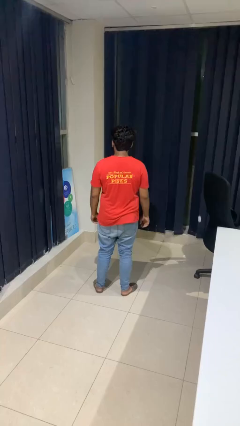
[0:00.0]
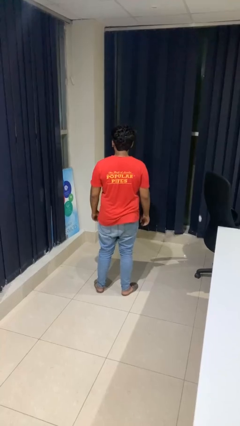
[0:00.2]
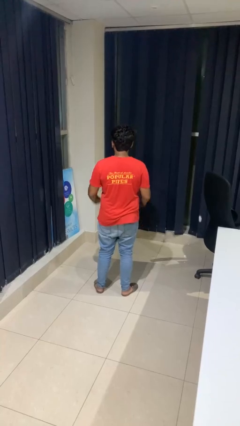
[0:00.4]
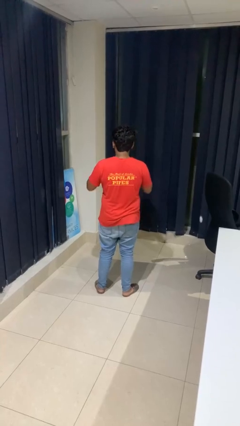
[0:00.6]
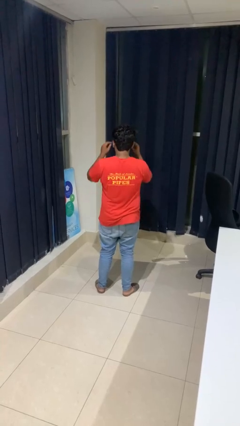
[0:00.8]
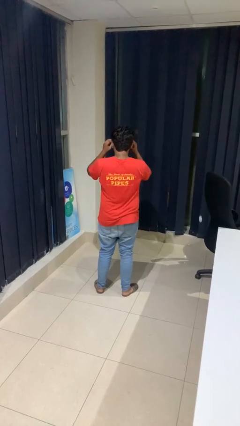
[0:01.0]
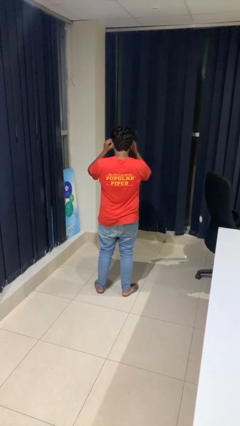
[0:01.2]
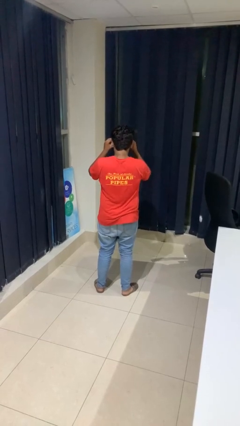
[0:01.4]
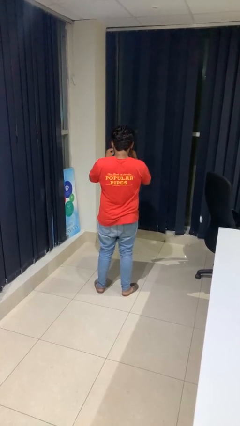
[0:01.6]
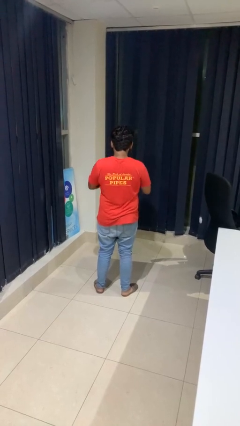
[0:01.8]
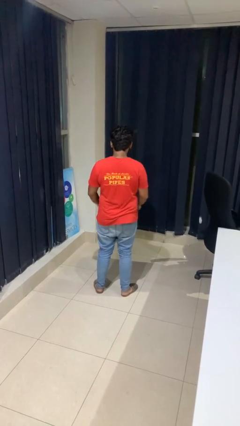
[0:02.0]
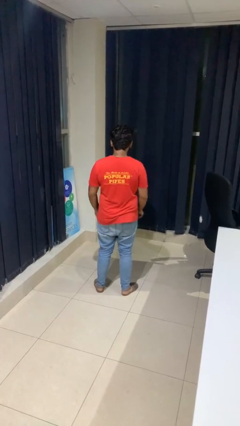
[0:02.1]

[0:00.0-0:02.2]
person takes off glasses

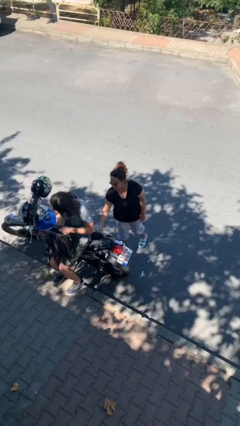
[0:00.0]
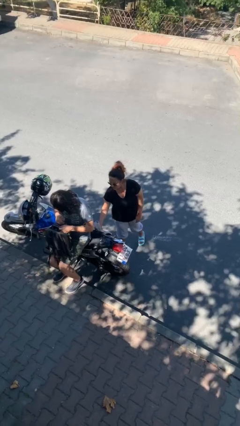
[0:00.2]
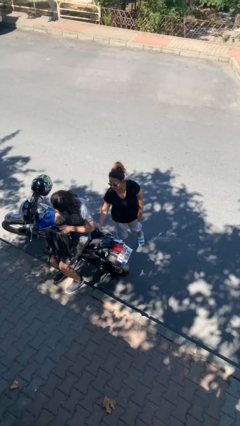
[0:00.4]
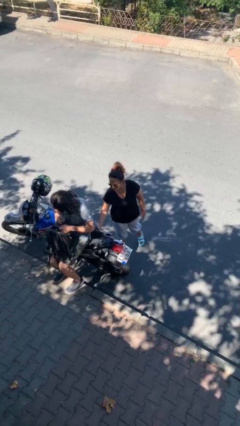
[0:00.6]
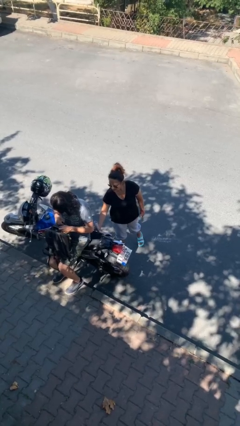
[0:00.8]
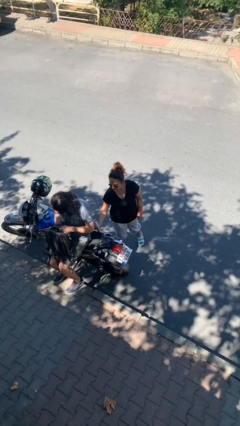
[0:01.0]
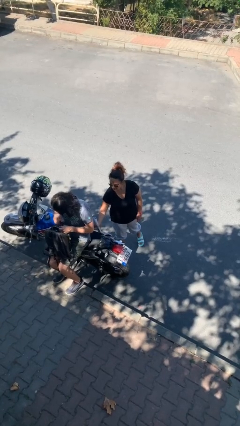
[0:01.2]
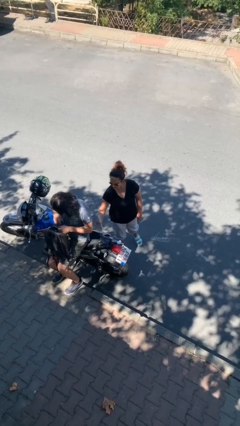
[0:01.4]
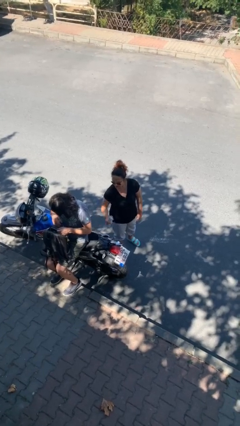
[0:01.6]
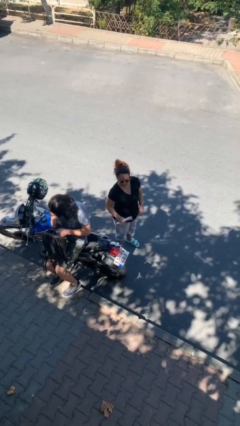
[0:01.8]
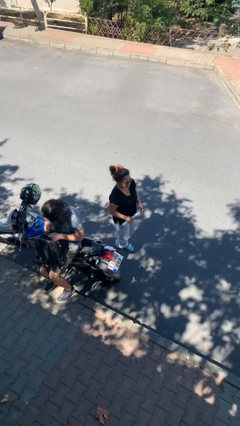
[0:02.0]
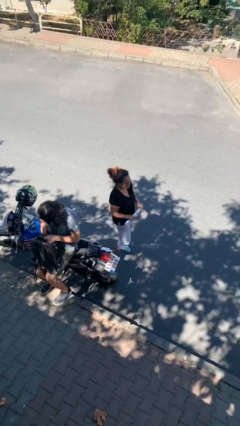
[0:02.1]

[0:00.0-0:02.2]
person steals object from person

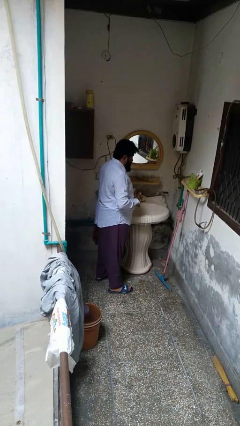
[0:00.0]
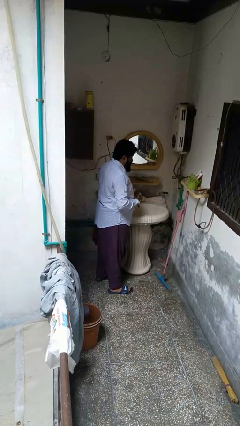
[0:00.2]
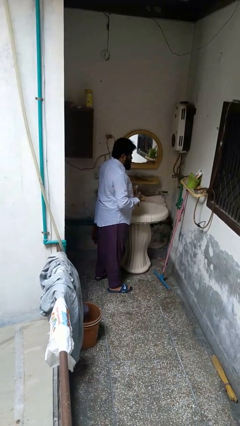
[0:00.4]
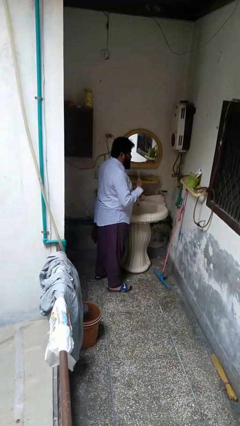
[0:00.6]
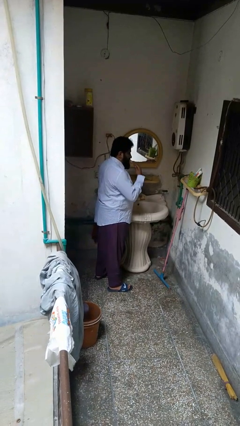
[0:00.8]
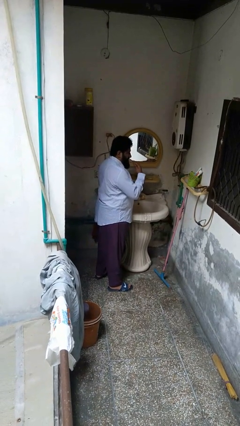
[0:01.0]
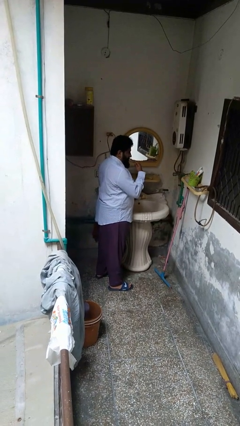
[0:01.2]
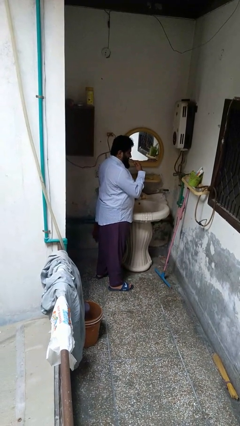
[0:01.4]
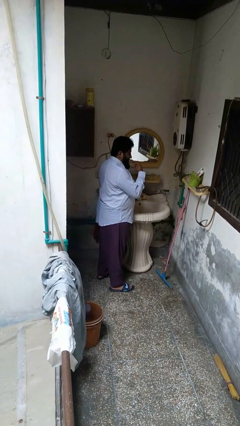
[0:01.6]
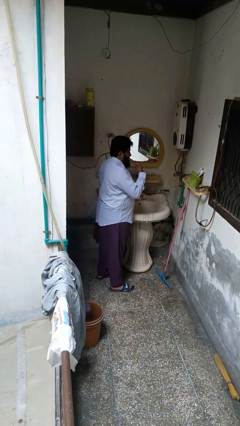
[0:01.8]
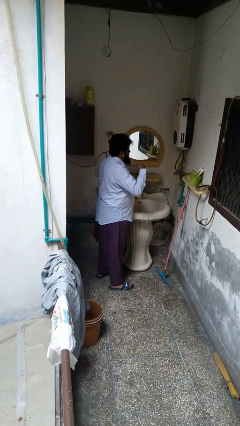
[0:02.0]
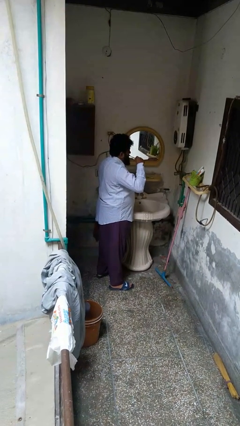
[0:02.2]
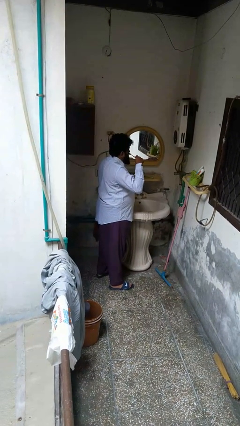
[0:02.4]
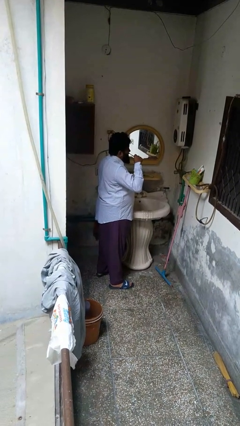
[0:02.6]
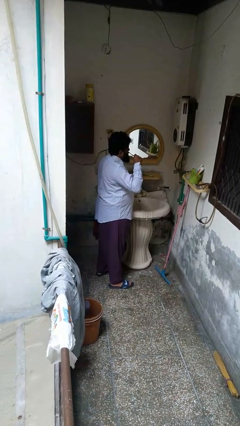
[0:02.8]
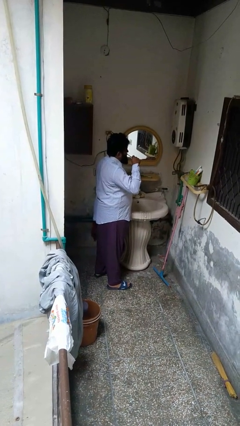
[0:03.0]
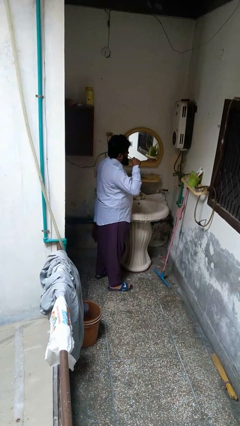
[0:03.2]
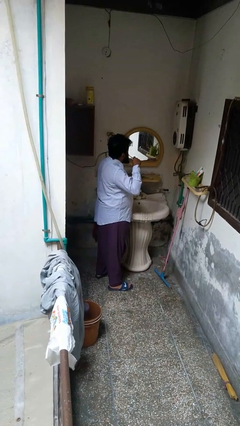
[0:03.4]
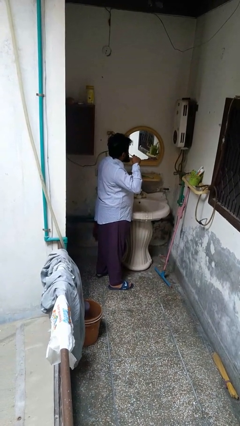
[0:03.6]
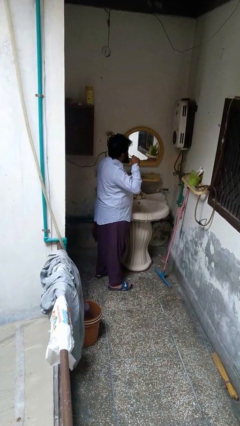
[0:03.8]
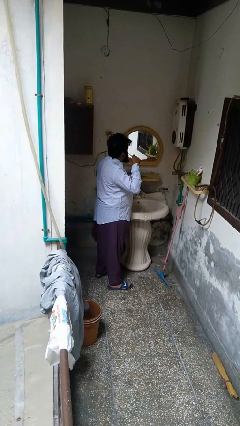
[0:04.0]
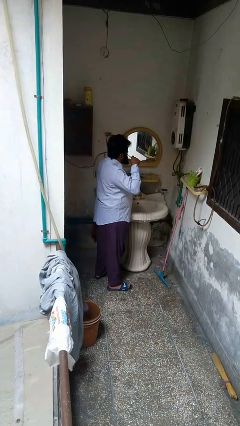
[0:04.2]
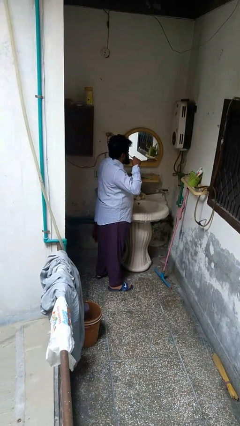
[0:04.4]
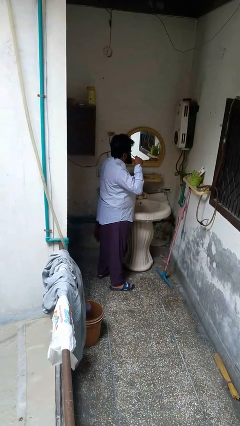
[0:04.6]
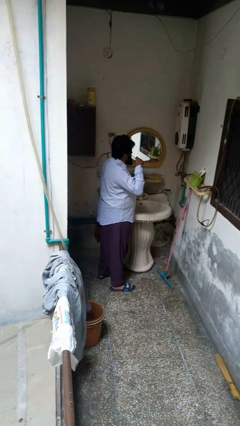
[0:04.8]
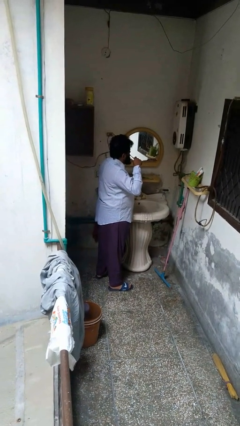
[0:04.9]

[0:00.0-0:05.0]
person brushes teeth

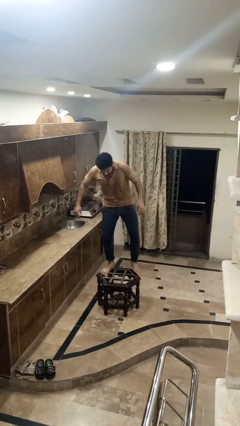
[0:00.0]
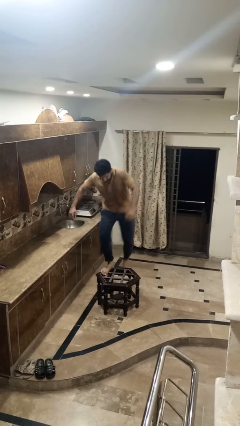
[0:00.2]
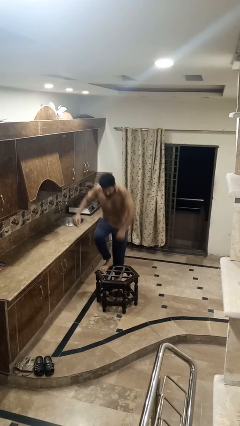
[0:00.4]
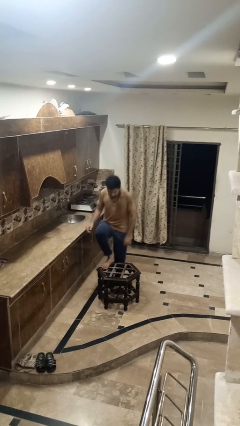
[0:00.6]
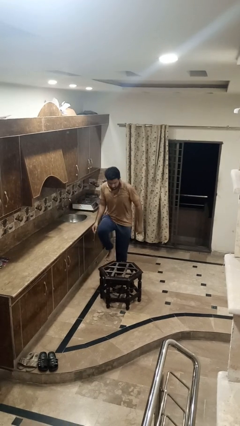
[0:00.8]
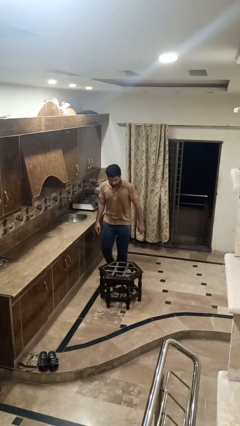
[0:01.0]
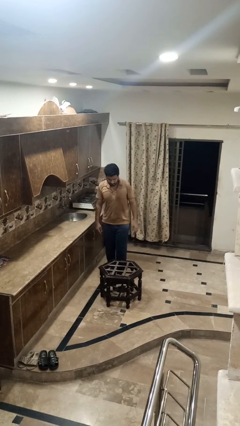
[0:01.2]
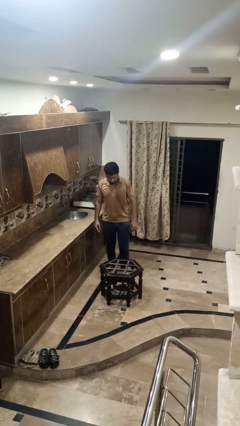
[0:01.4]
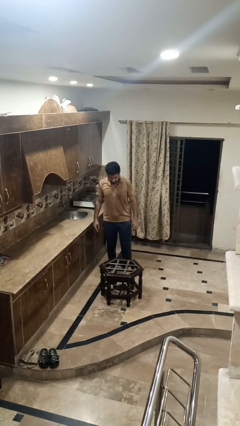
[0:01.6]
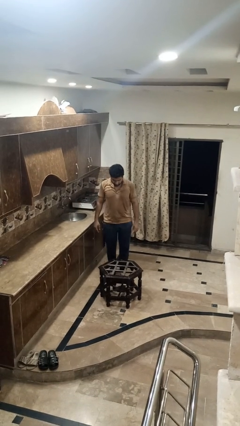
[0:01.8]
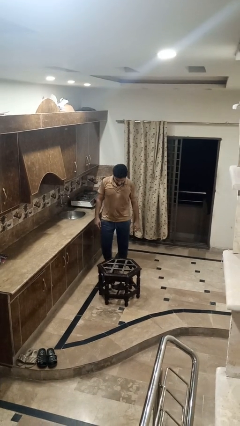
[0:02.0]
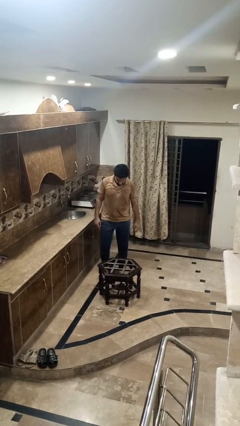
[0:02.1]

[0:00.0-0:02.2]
person climbs off table

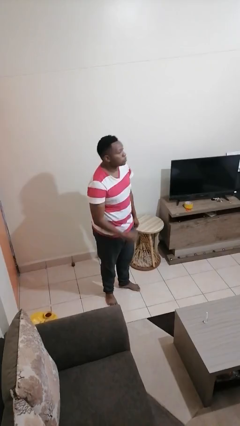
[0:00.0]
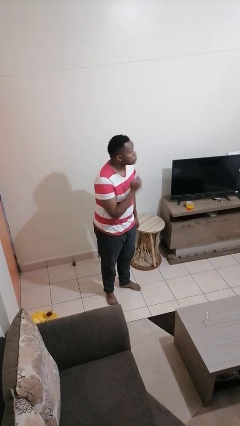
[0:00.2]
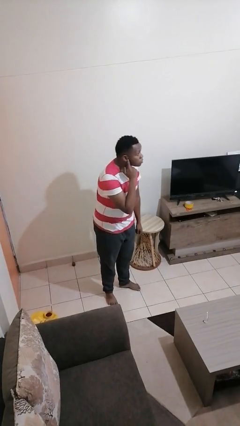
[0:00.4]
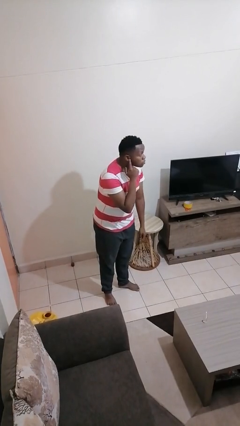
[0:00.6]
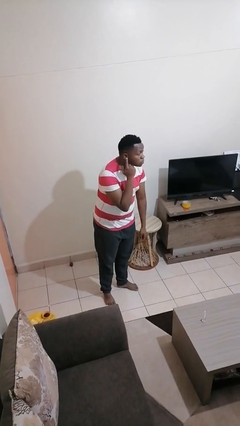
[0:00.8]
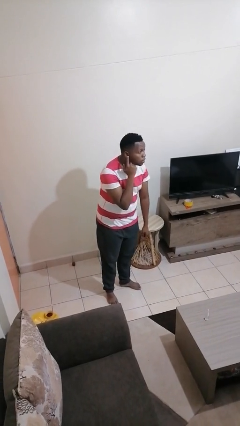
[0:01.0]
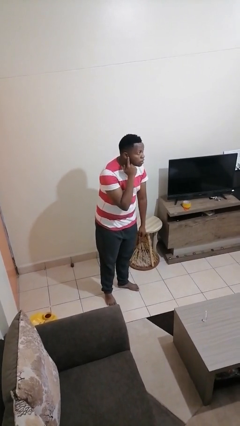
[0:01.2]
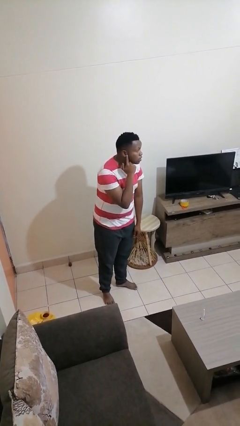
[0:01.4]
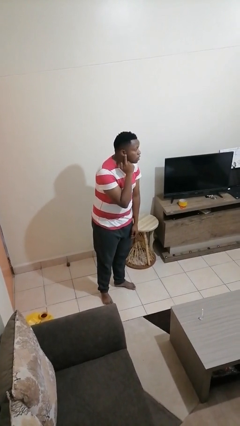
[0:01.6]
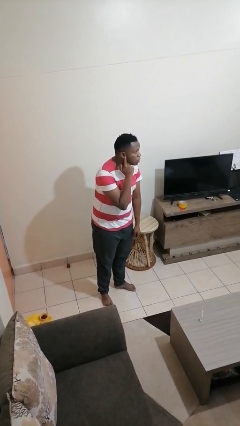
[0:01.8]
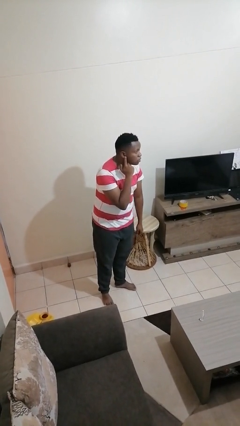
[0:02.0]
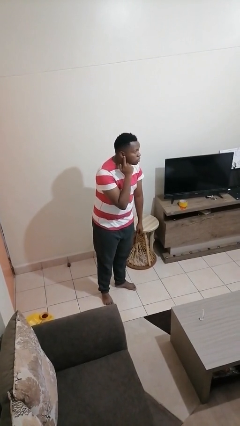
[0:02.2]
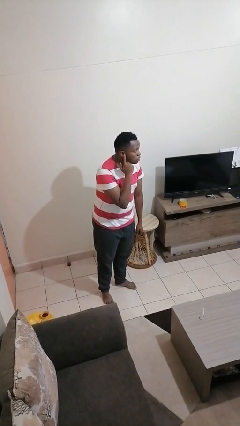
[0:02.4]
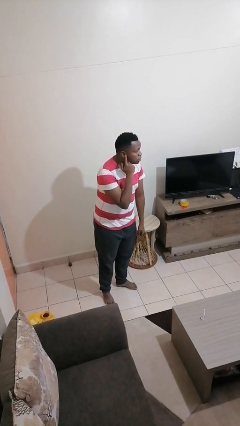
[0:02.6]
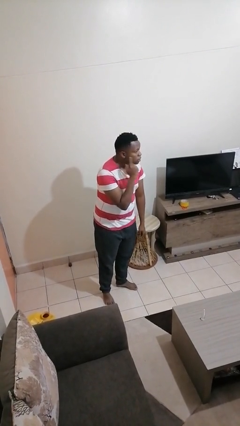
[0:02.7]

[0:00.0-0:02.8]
person gestures listen closely

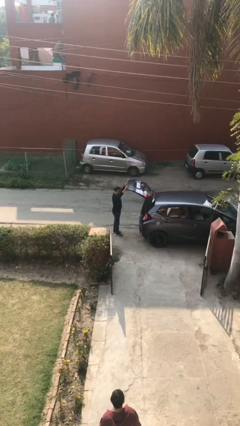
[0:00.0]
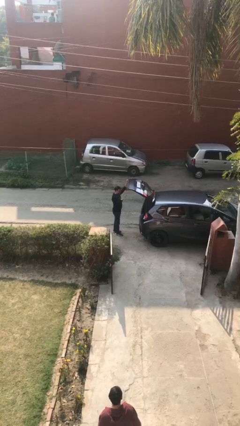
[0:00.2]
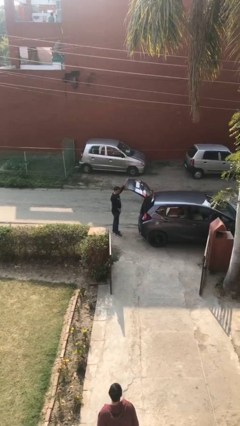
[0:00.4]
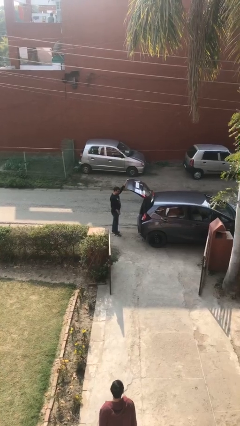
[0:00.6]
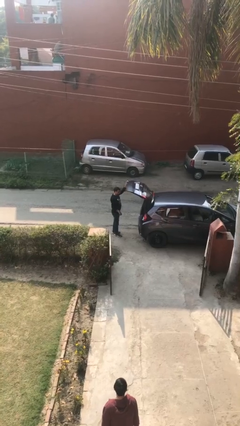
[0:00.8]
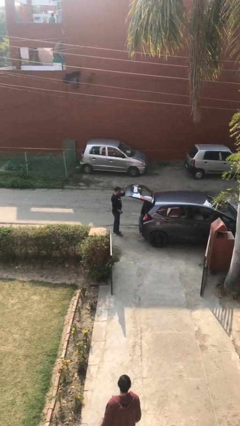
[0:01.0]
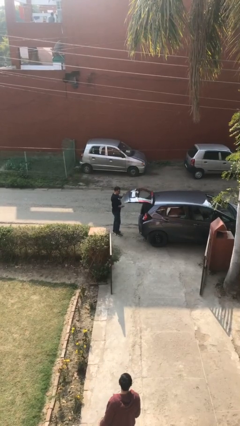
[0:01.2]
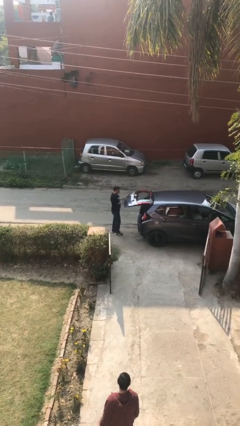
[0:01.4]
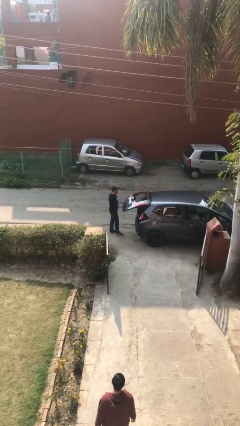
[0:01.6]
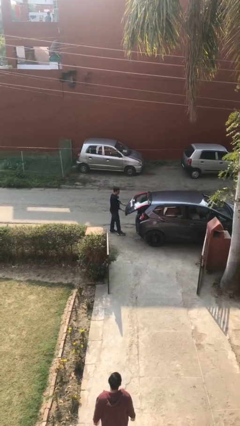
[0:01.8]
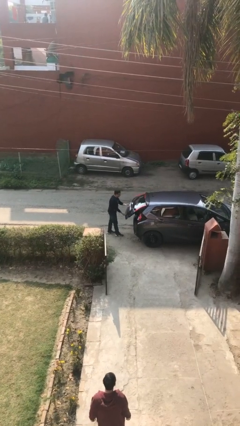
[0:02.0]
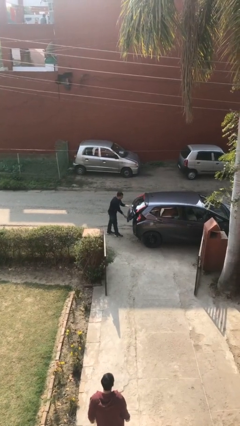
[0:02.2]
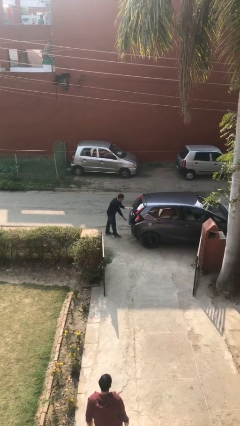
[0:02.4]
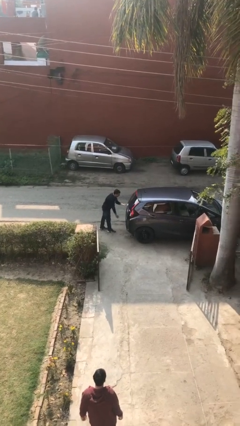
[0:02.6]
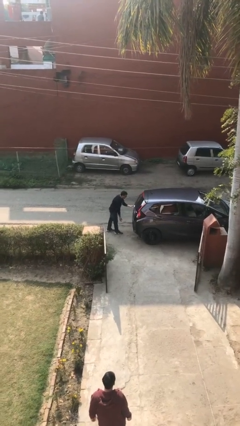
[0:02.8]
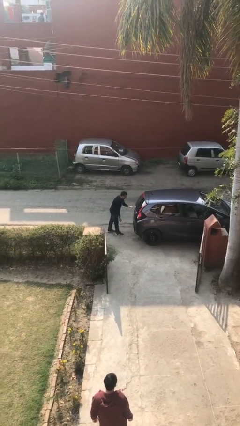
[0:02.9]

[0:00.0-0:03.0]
person closes car trunk

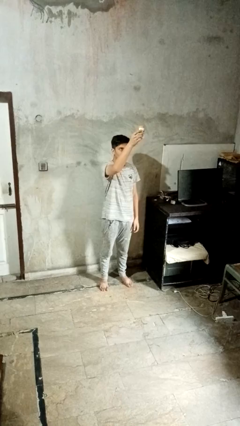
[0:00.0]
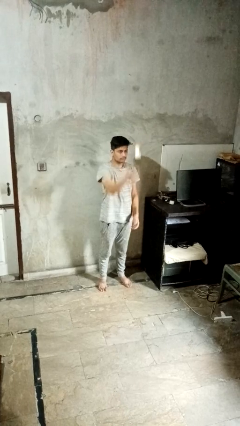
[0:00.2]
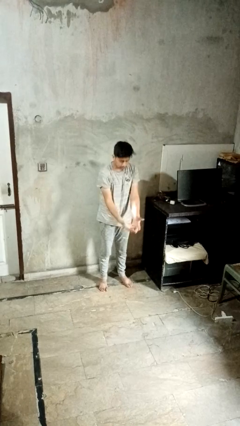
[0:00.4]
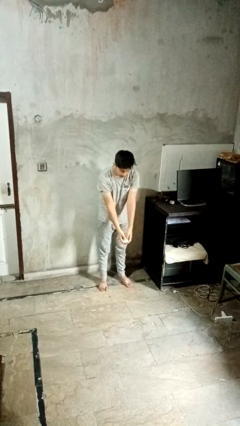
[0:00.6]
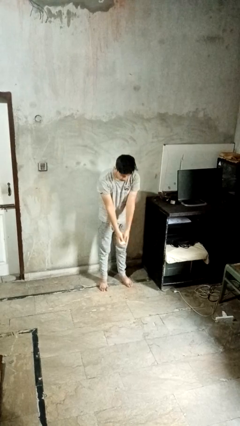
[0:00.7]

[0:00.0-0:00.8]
person catches dropped object
